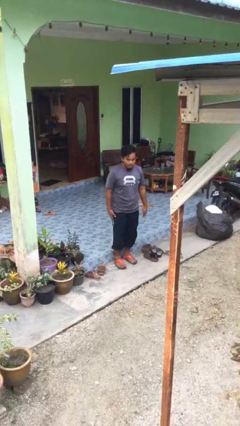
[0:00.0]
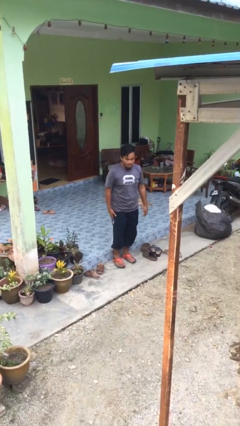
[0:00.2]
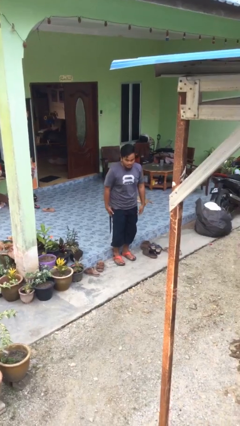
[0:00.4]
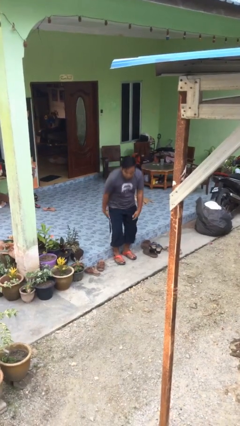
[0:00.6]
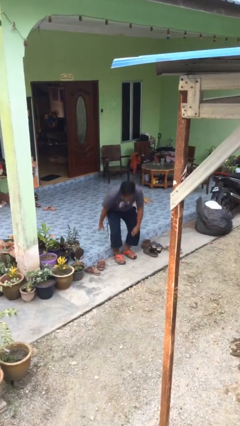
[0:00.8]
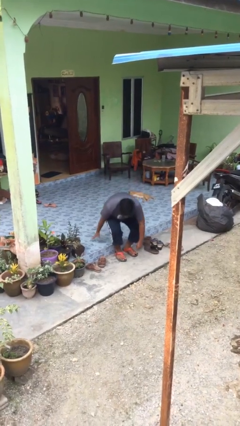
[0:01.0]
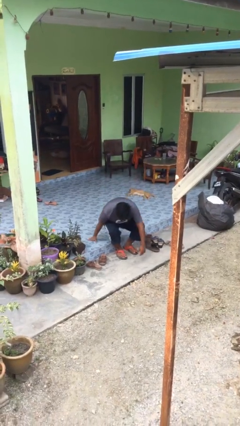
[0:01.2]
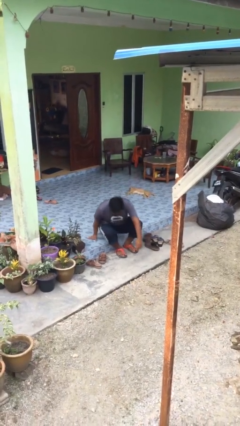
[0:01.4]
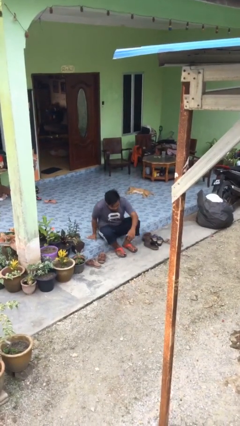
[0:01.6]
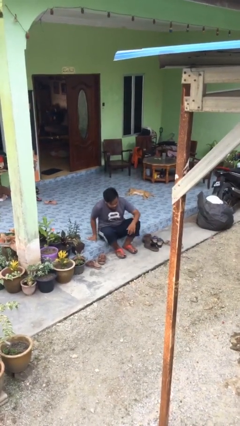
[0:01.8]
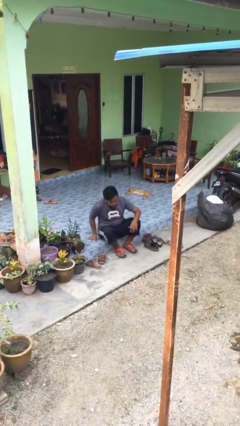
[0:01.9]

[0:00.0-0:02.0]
person sits down

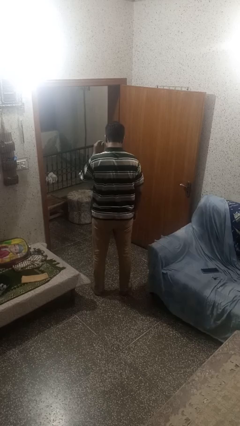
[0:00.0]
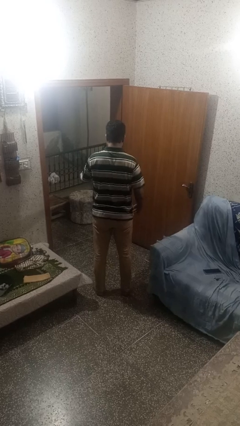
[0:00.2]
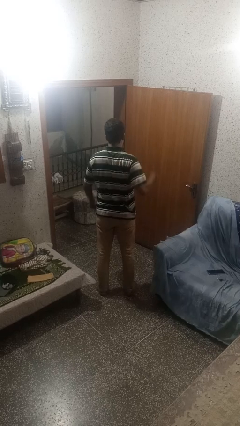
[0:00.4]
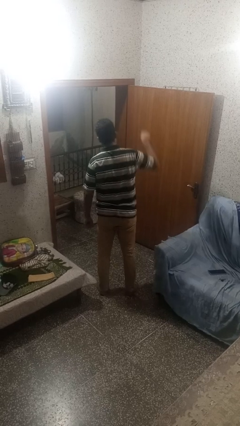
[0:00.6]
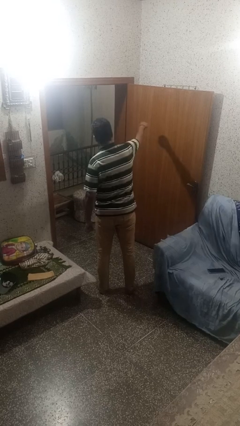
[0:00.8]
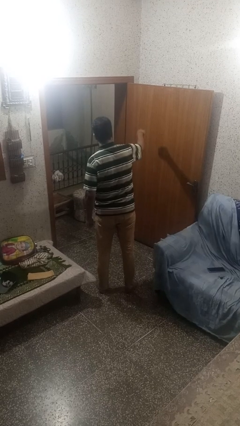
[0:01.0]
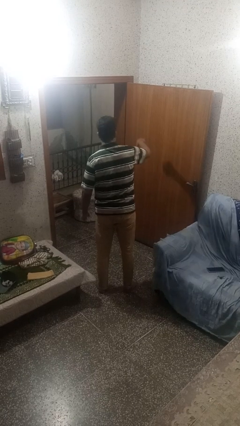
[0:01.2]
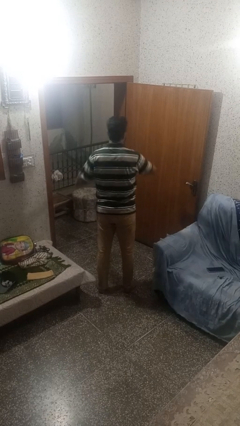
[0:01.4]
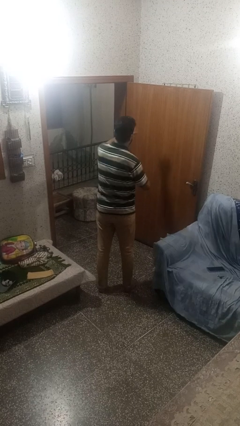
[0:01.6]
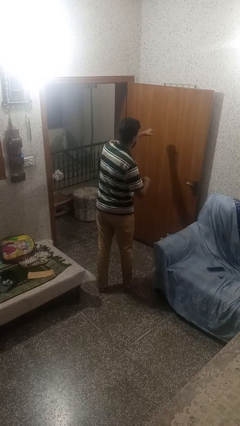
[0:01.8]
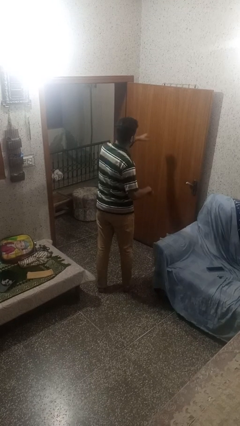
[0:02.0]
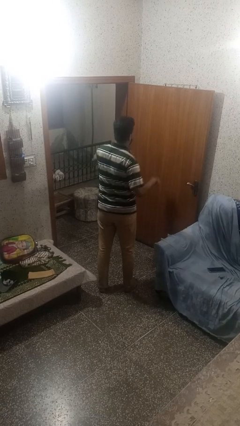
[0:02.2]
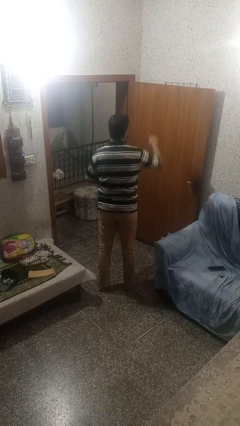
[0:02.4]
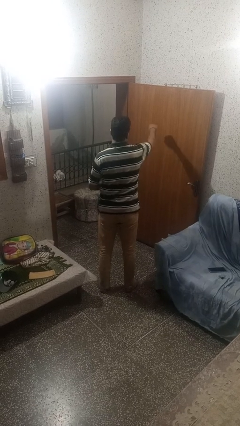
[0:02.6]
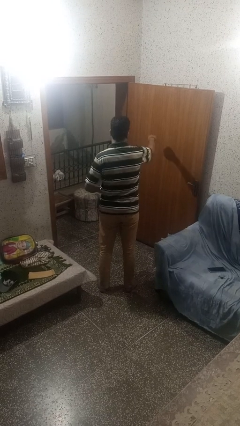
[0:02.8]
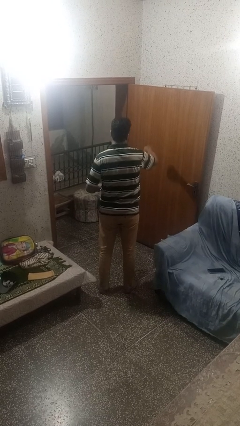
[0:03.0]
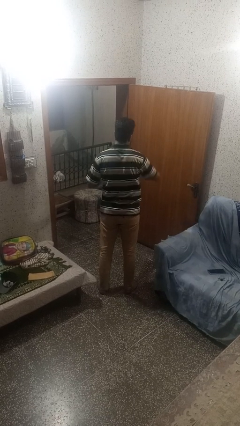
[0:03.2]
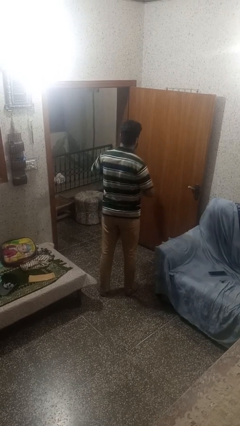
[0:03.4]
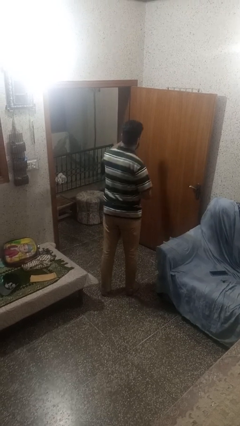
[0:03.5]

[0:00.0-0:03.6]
person punches

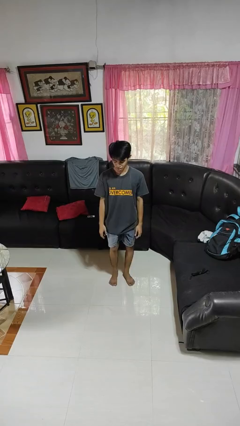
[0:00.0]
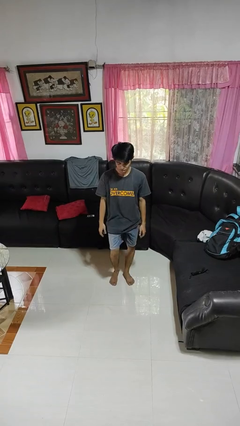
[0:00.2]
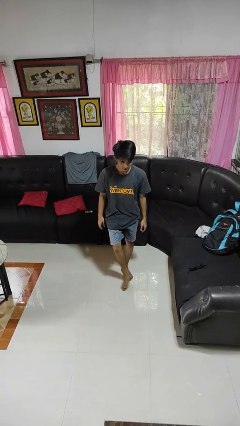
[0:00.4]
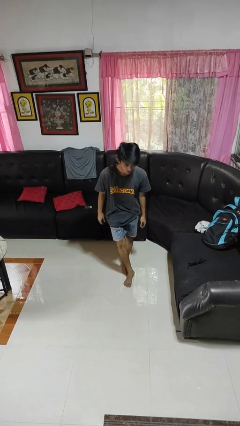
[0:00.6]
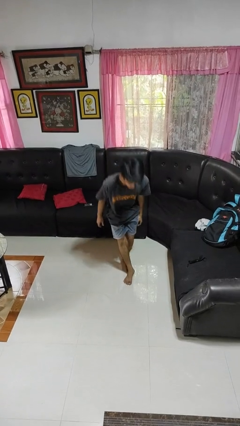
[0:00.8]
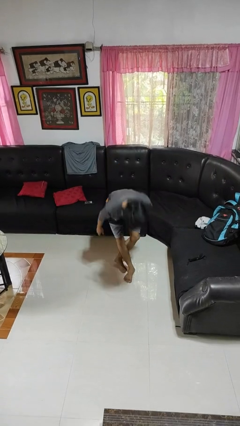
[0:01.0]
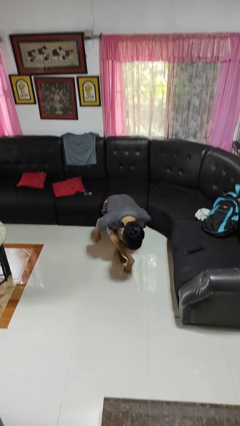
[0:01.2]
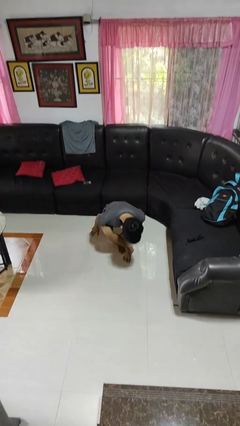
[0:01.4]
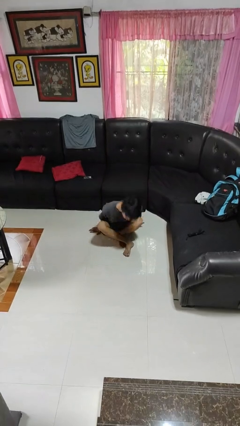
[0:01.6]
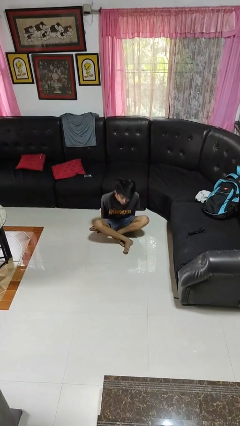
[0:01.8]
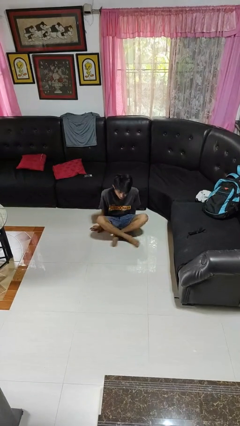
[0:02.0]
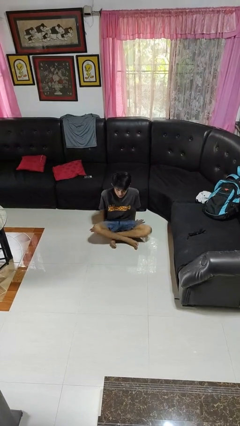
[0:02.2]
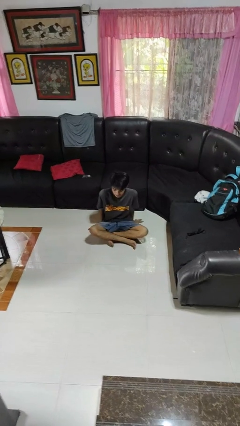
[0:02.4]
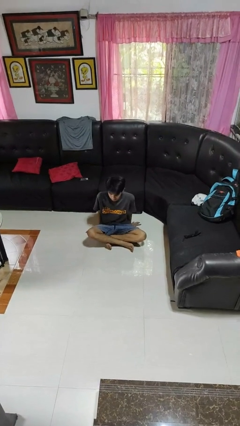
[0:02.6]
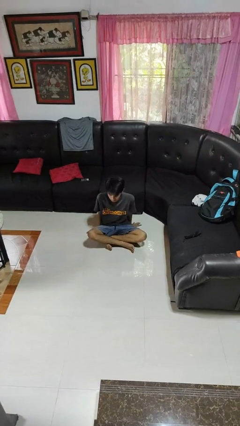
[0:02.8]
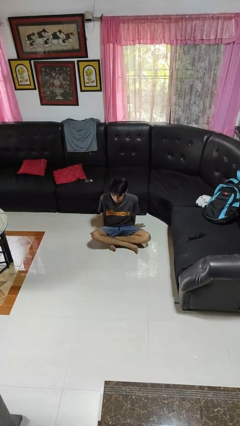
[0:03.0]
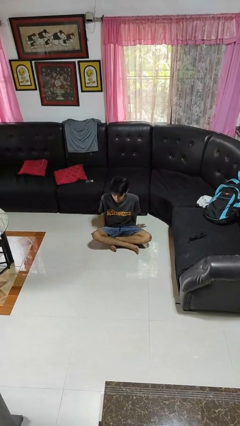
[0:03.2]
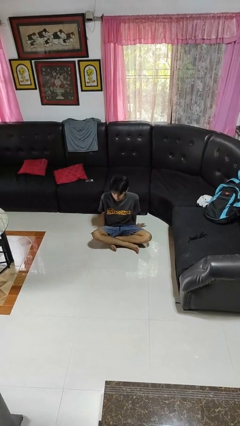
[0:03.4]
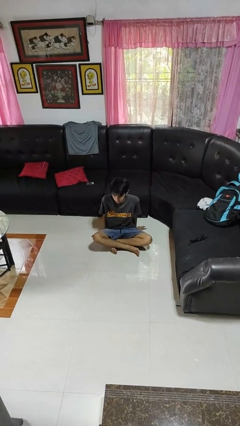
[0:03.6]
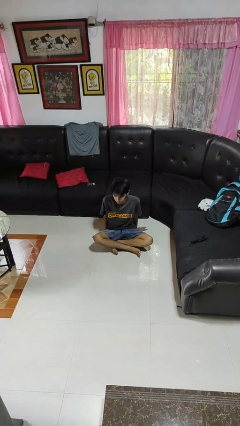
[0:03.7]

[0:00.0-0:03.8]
person sits crisscross

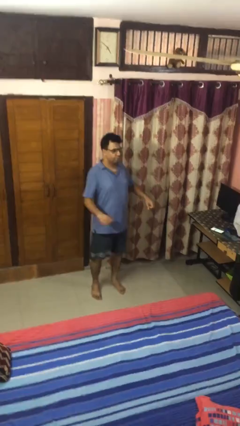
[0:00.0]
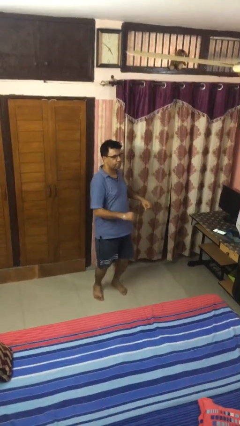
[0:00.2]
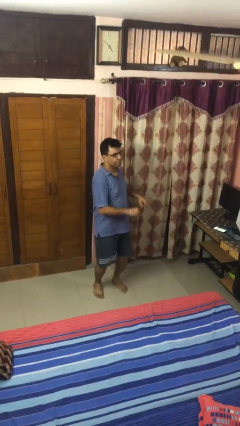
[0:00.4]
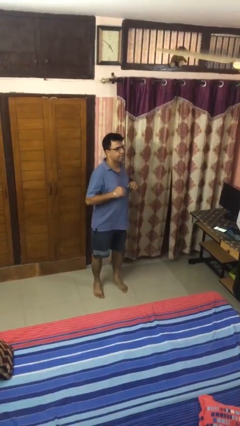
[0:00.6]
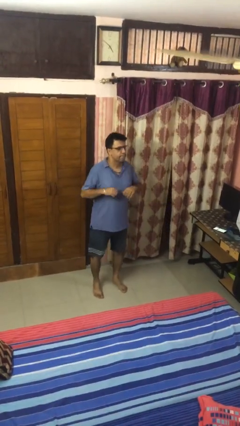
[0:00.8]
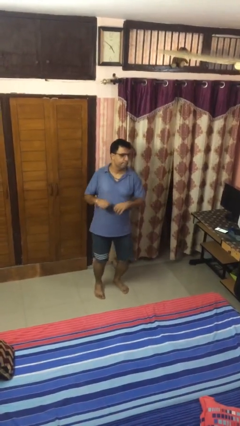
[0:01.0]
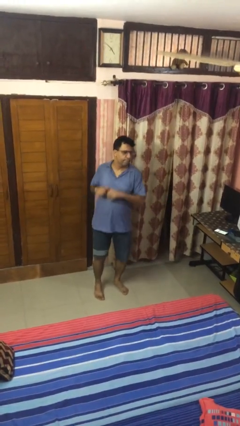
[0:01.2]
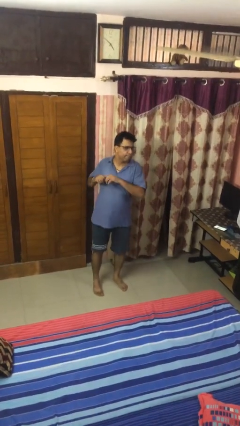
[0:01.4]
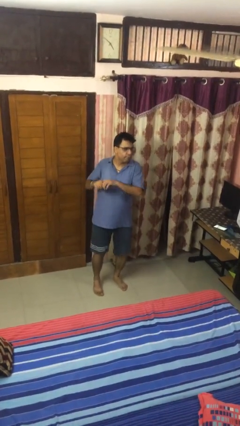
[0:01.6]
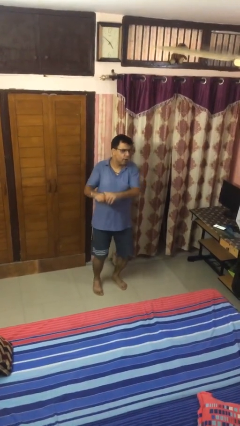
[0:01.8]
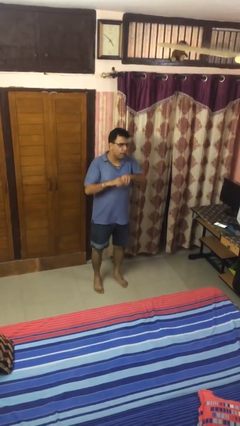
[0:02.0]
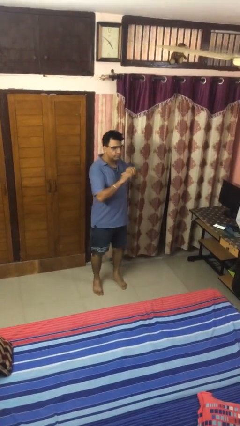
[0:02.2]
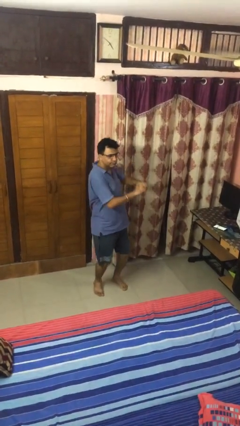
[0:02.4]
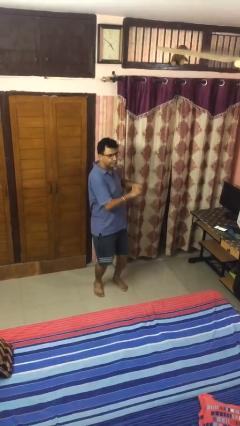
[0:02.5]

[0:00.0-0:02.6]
person dances in place

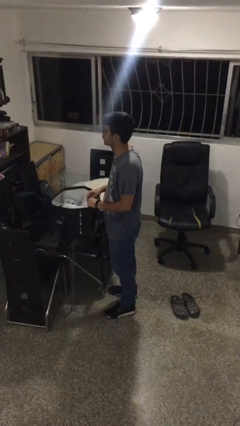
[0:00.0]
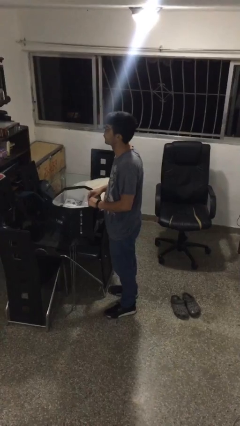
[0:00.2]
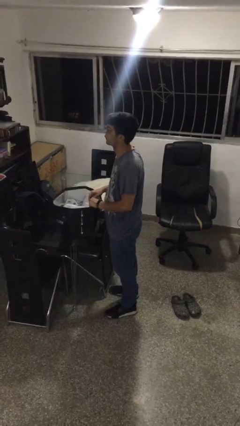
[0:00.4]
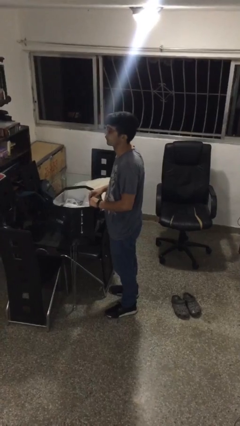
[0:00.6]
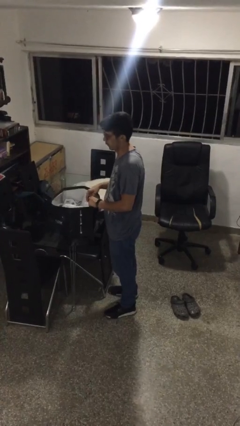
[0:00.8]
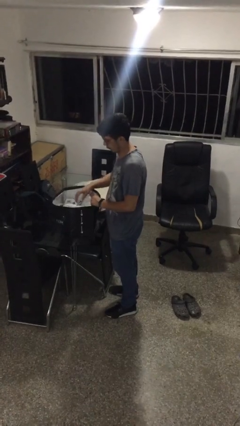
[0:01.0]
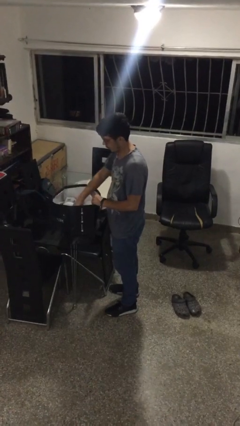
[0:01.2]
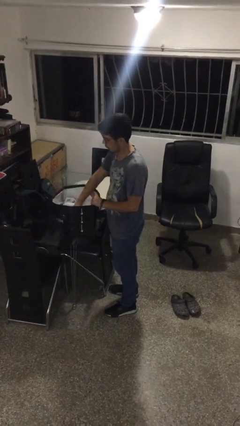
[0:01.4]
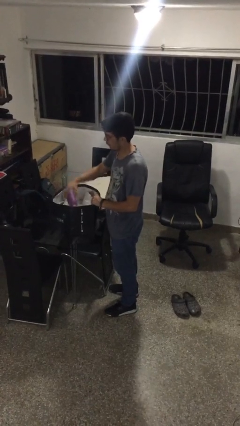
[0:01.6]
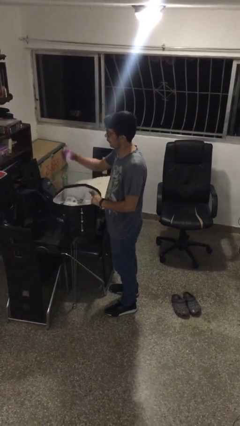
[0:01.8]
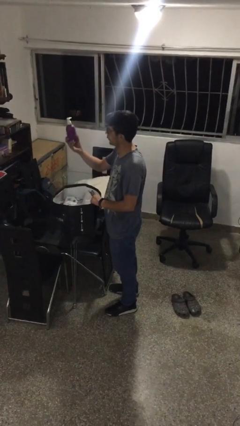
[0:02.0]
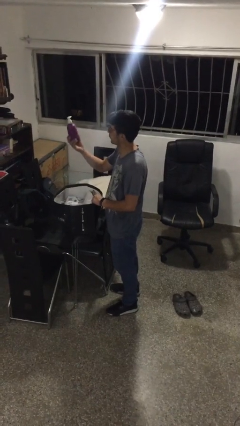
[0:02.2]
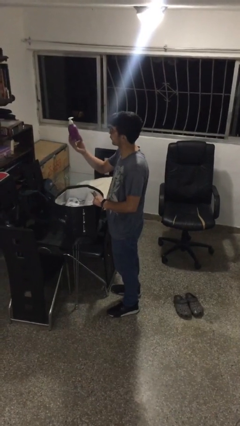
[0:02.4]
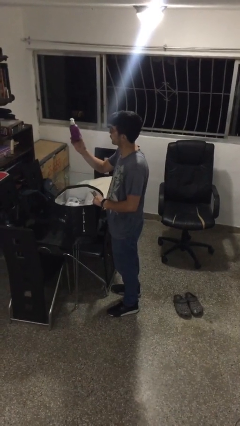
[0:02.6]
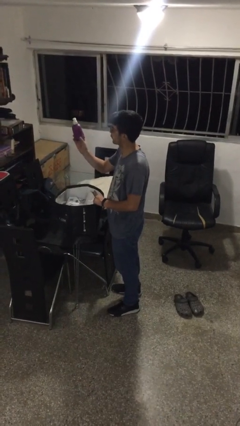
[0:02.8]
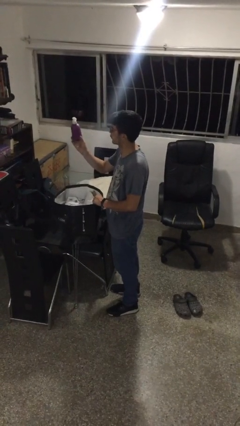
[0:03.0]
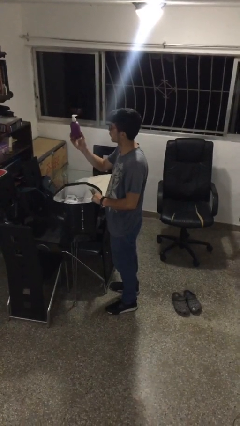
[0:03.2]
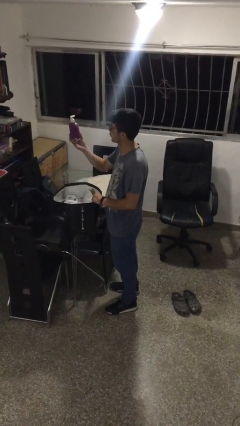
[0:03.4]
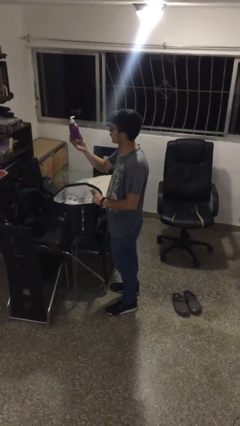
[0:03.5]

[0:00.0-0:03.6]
person takes object from bag

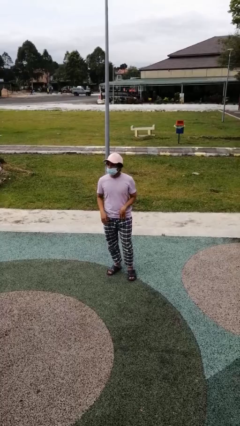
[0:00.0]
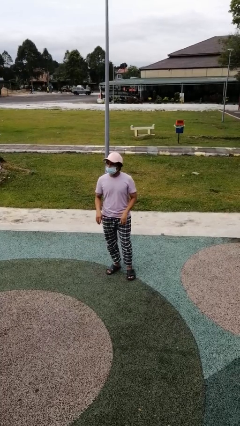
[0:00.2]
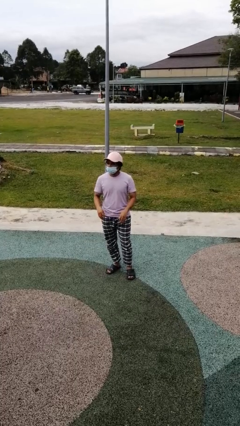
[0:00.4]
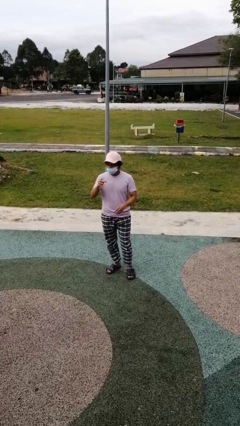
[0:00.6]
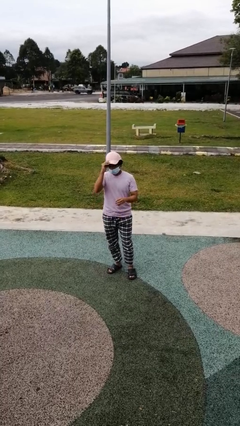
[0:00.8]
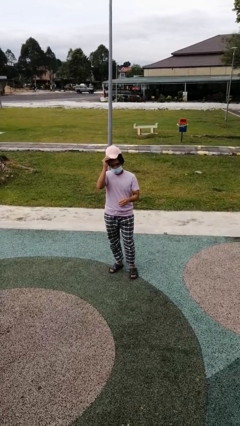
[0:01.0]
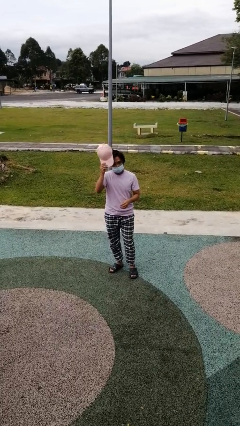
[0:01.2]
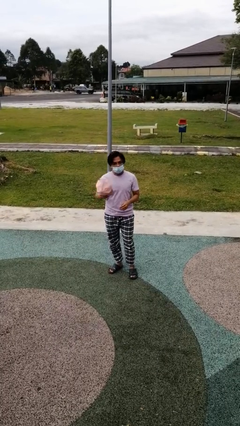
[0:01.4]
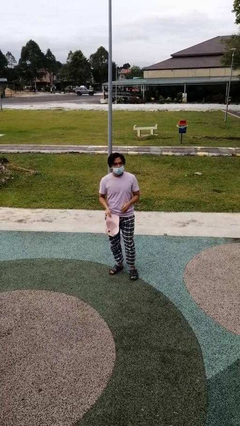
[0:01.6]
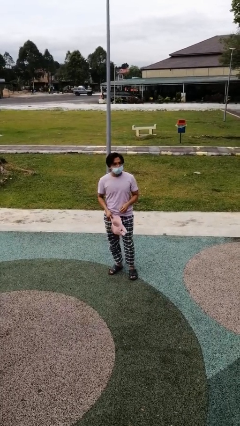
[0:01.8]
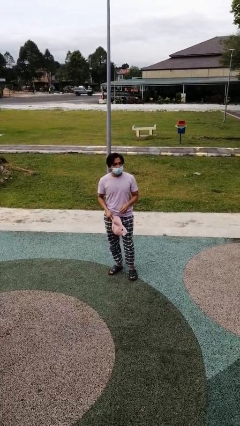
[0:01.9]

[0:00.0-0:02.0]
person takes off hat
